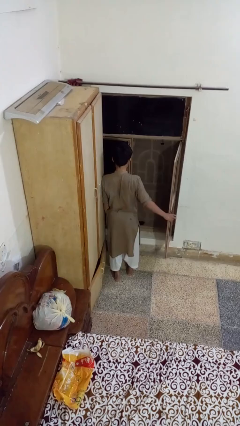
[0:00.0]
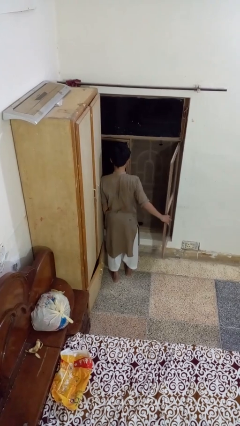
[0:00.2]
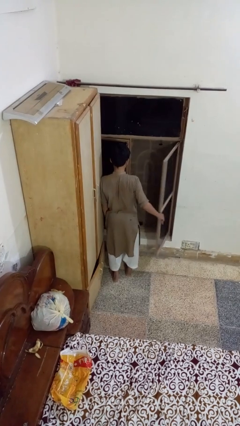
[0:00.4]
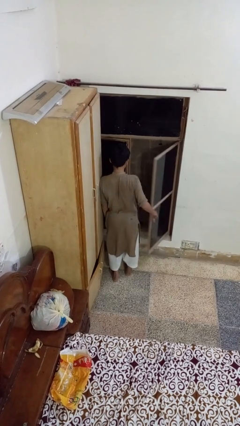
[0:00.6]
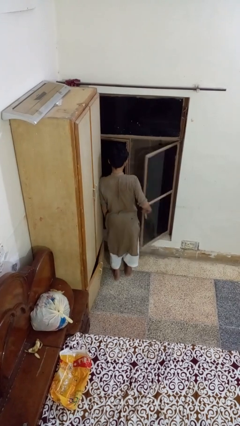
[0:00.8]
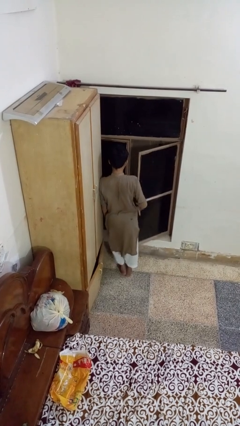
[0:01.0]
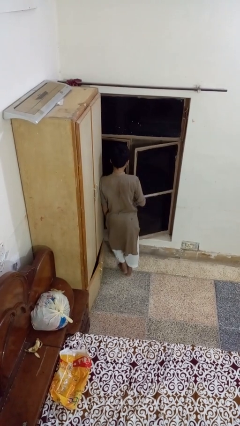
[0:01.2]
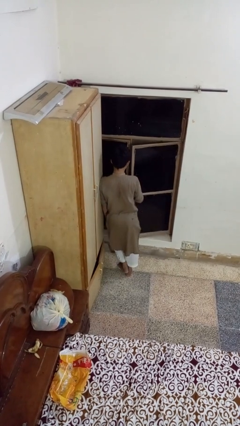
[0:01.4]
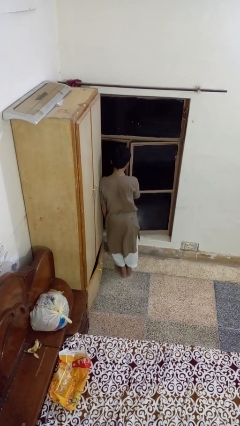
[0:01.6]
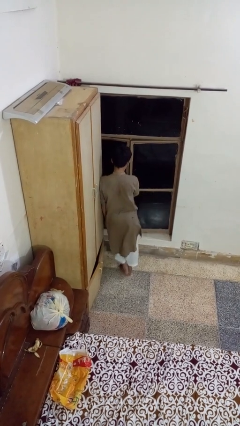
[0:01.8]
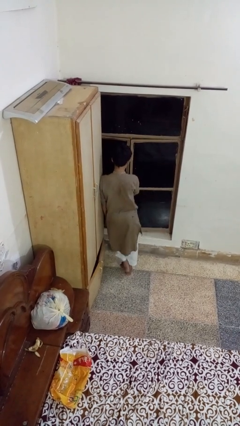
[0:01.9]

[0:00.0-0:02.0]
person closes home window

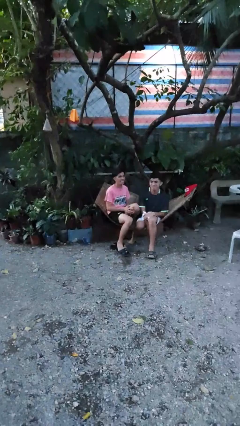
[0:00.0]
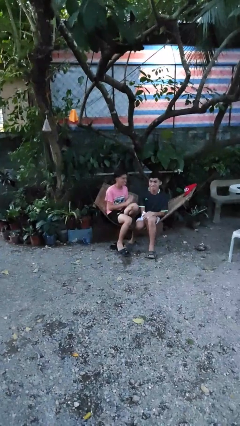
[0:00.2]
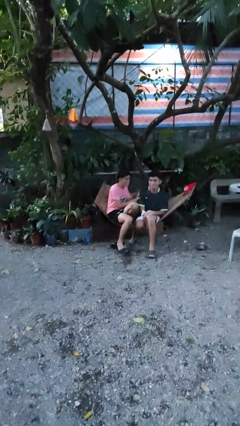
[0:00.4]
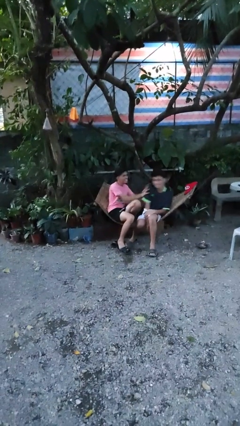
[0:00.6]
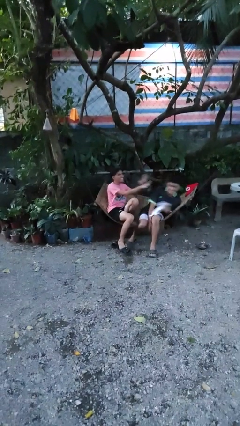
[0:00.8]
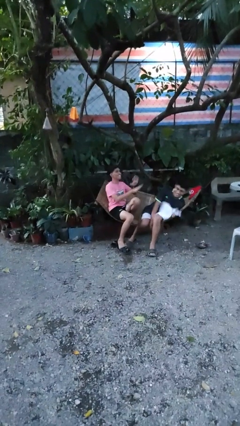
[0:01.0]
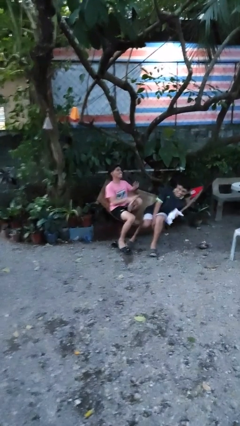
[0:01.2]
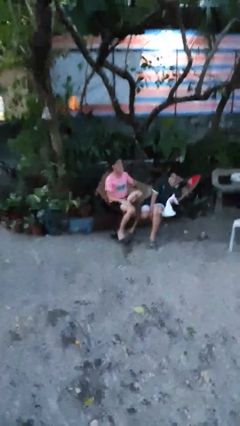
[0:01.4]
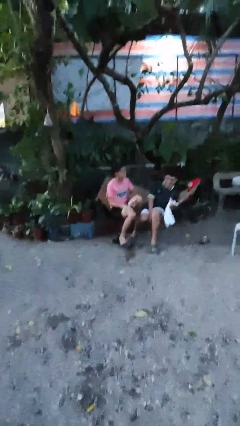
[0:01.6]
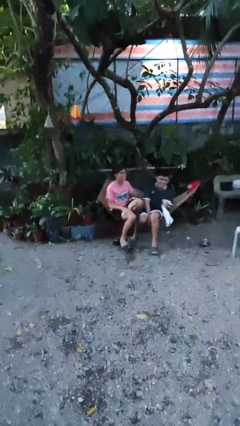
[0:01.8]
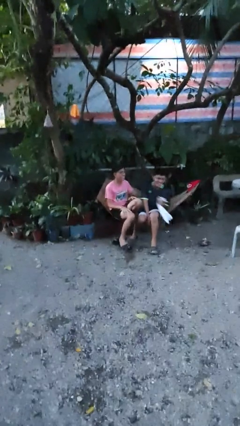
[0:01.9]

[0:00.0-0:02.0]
person shoves person

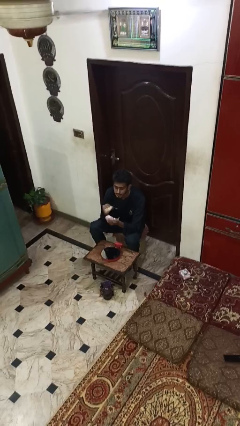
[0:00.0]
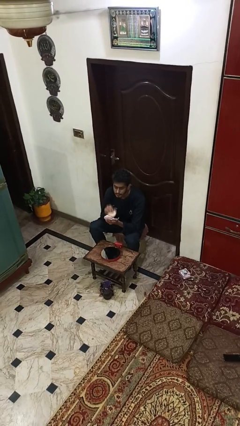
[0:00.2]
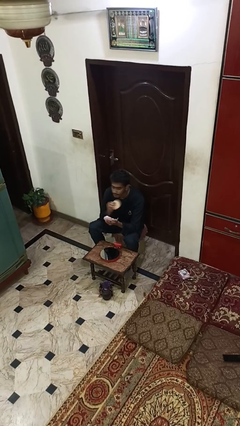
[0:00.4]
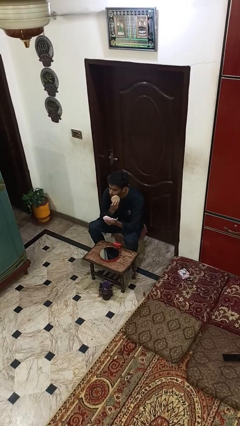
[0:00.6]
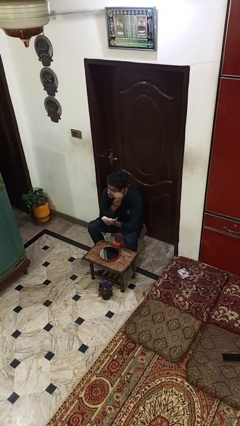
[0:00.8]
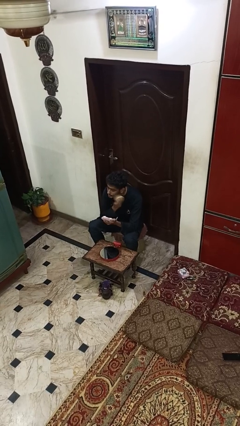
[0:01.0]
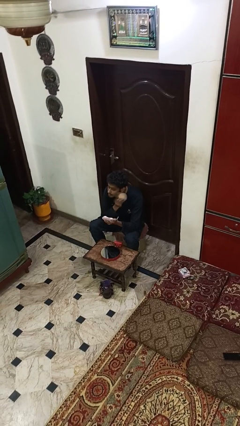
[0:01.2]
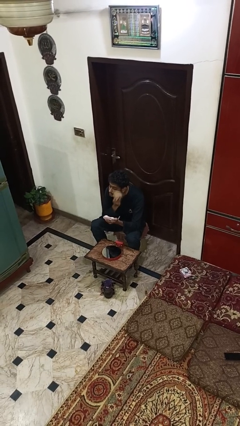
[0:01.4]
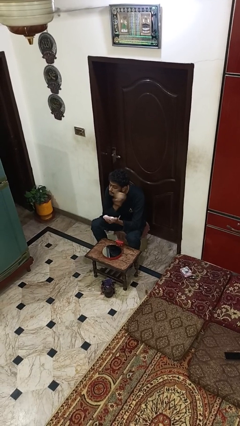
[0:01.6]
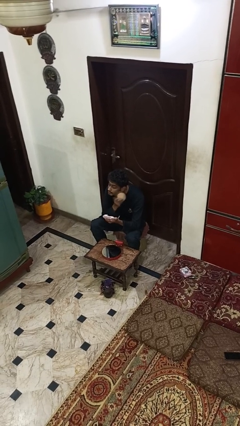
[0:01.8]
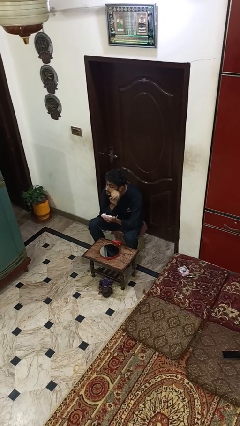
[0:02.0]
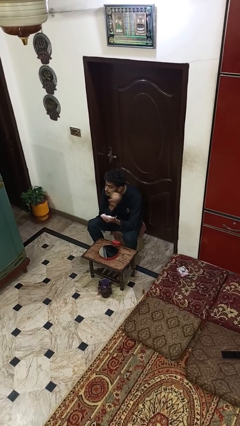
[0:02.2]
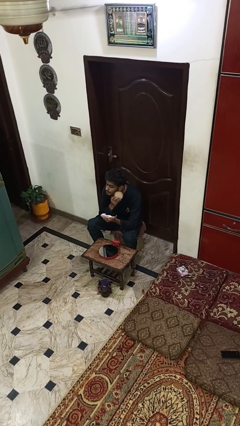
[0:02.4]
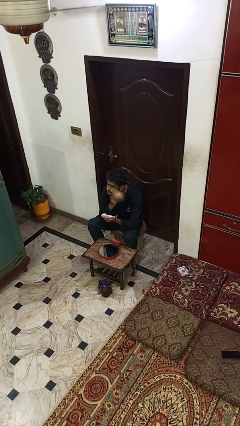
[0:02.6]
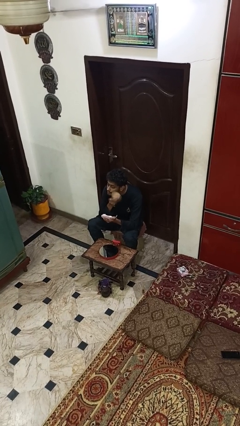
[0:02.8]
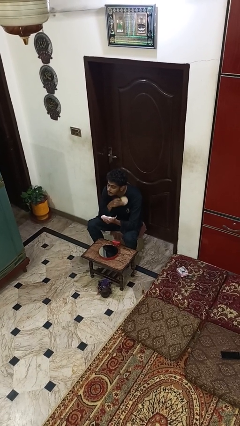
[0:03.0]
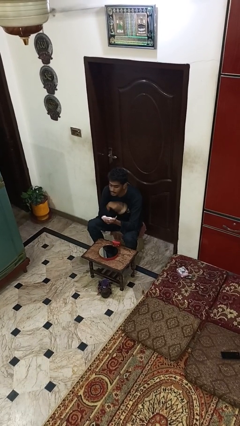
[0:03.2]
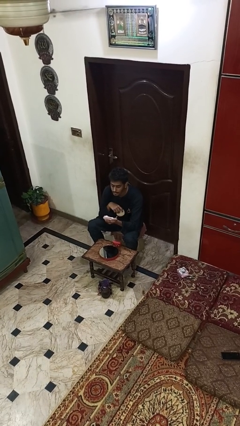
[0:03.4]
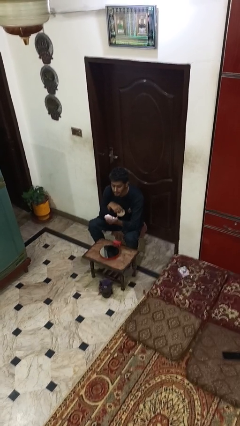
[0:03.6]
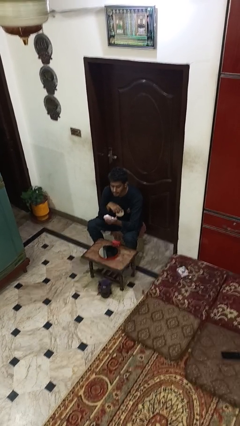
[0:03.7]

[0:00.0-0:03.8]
person applies foundation makeup

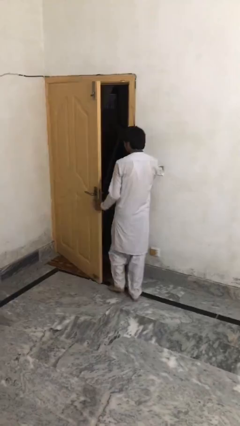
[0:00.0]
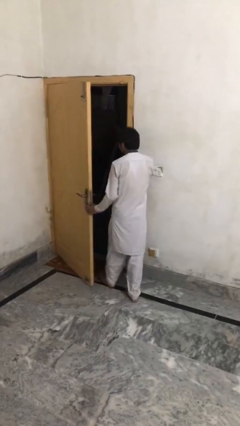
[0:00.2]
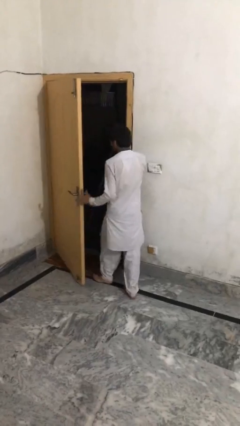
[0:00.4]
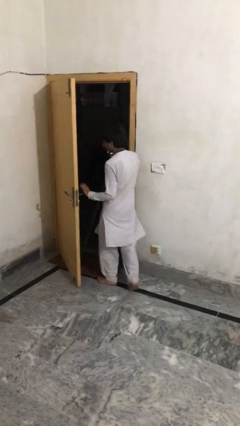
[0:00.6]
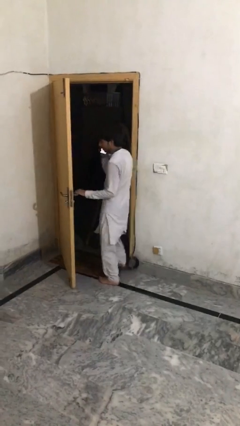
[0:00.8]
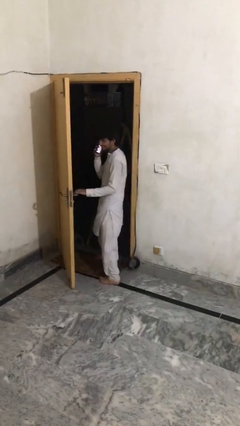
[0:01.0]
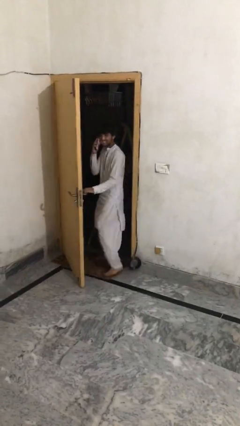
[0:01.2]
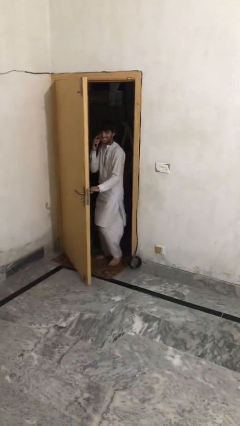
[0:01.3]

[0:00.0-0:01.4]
person exits scene through structure

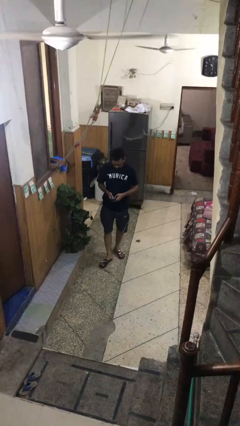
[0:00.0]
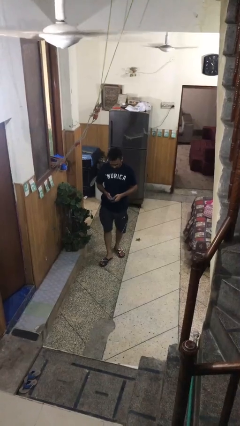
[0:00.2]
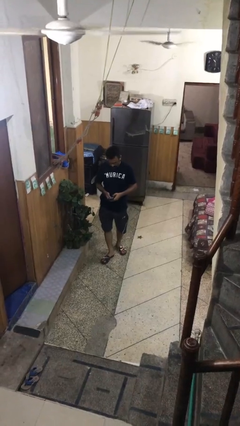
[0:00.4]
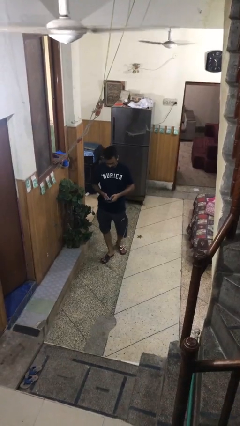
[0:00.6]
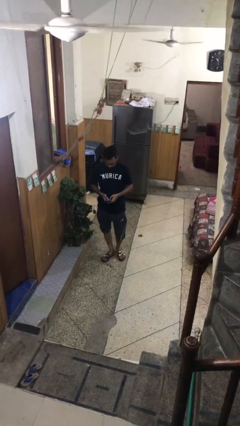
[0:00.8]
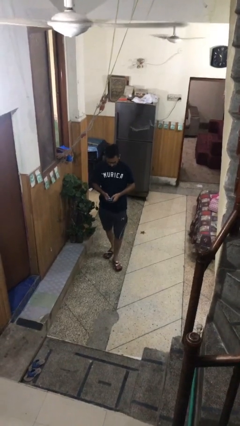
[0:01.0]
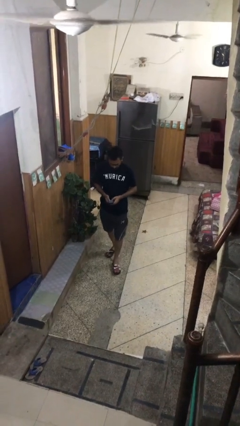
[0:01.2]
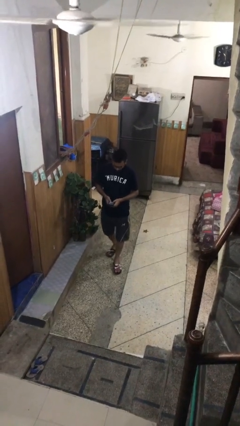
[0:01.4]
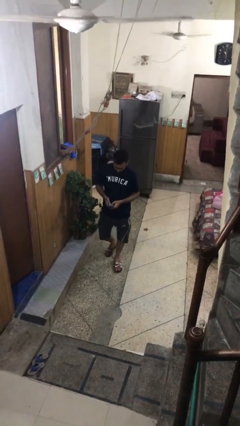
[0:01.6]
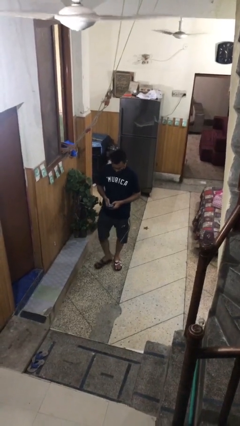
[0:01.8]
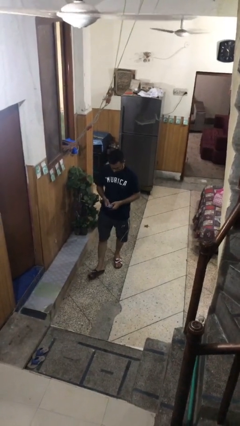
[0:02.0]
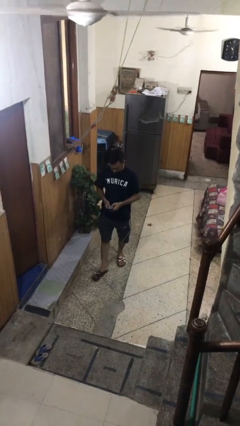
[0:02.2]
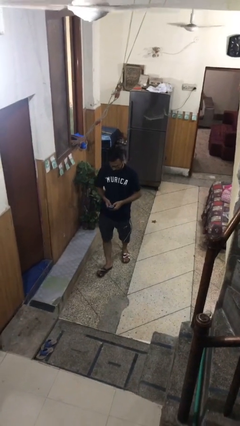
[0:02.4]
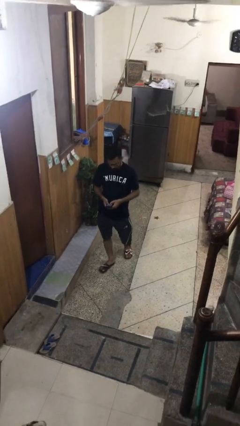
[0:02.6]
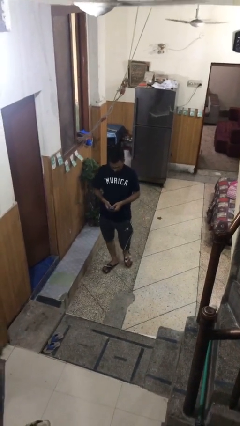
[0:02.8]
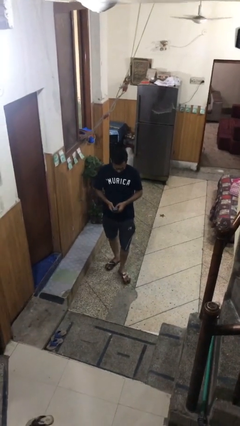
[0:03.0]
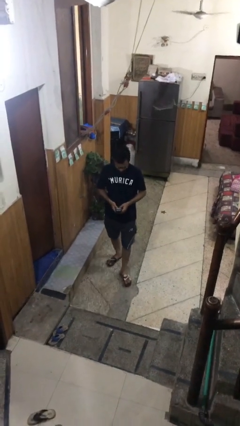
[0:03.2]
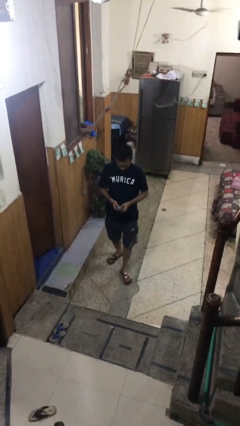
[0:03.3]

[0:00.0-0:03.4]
person texts on phone

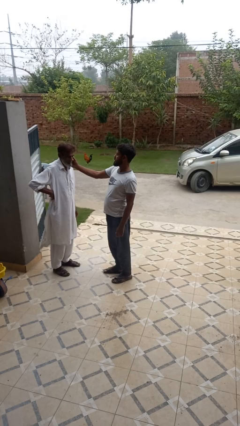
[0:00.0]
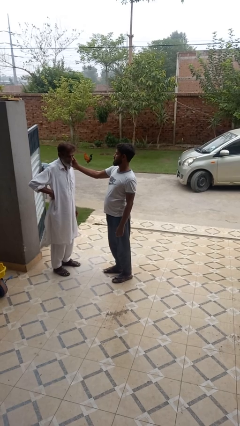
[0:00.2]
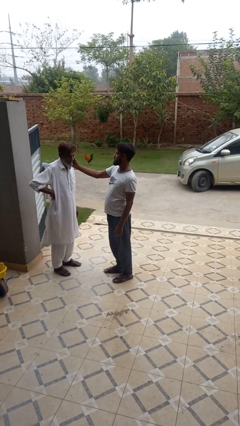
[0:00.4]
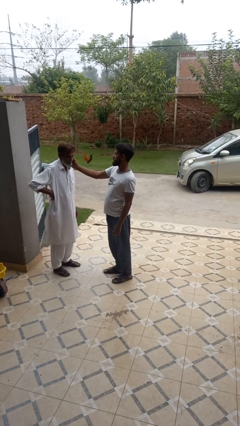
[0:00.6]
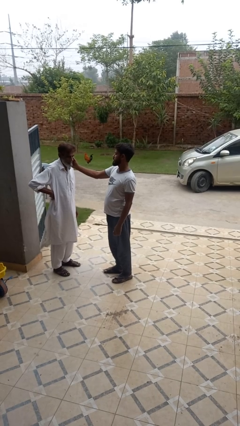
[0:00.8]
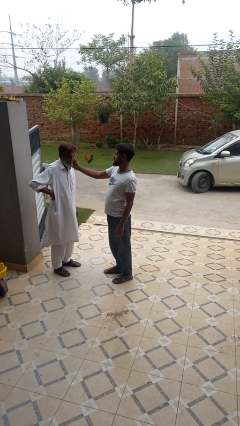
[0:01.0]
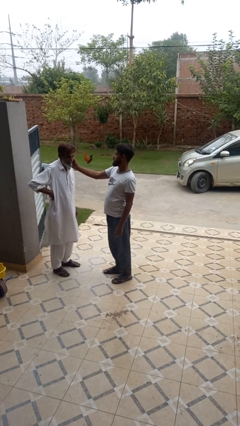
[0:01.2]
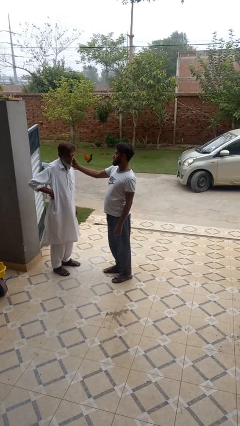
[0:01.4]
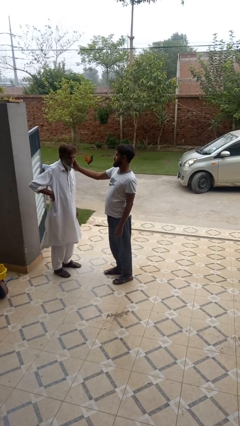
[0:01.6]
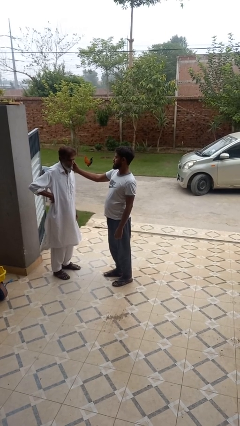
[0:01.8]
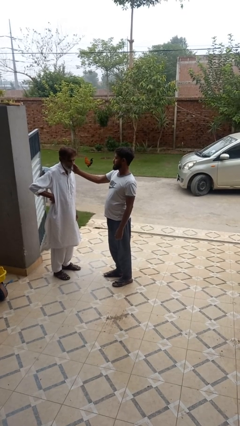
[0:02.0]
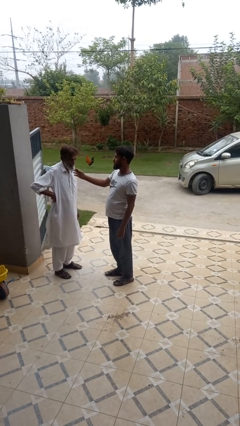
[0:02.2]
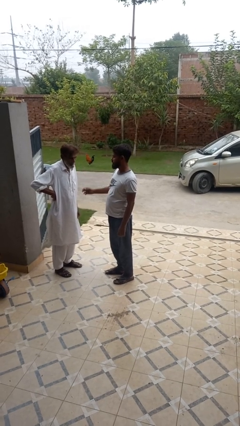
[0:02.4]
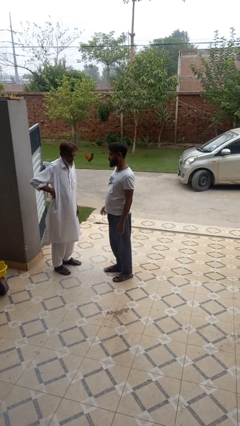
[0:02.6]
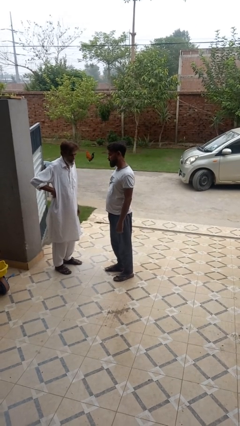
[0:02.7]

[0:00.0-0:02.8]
person touches face of person

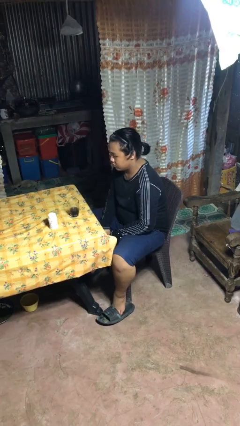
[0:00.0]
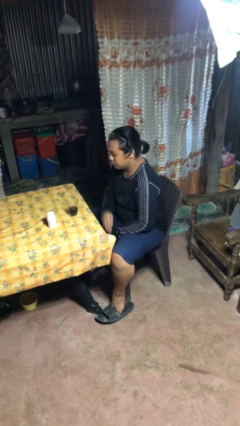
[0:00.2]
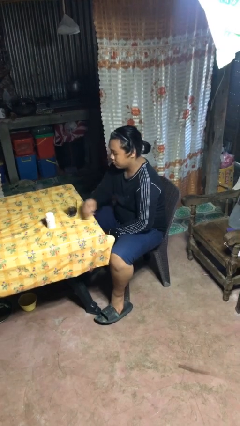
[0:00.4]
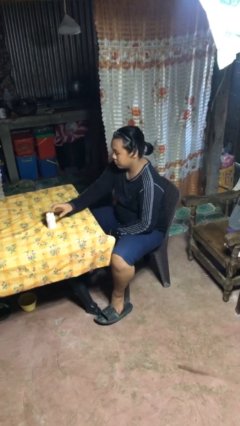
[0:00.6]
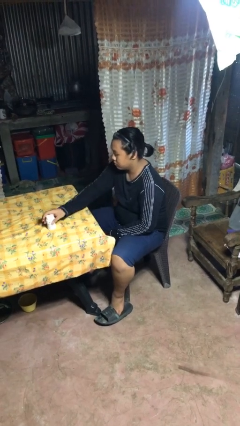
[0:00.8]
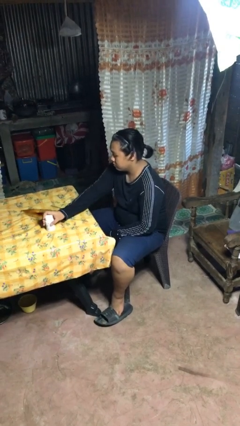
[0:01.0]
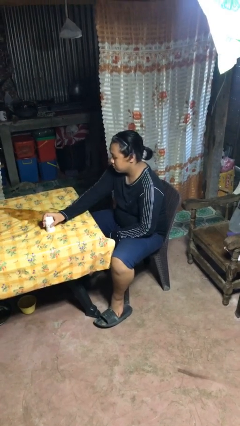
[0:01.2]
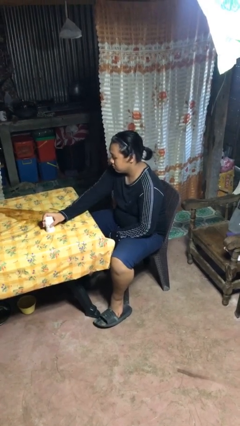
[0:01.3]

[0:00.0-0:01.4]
person spills on table

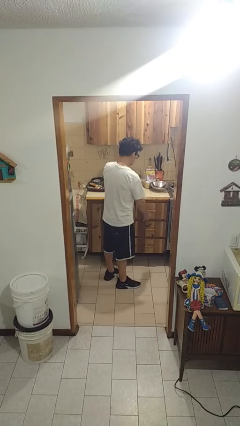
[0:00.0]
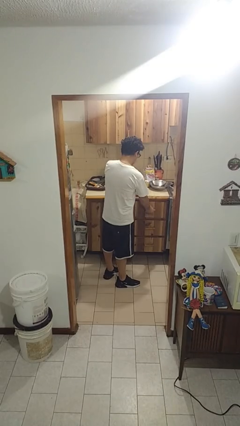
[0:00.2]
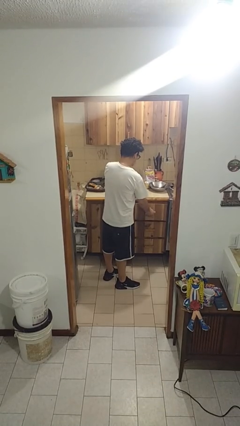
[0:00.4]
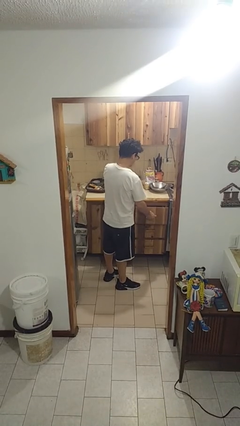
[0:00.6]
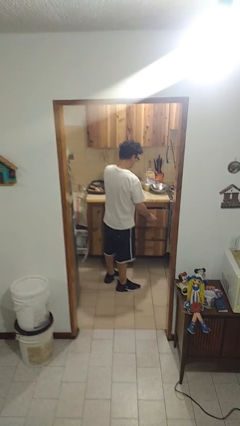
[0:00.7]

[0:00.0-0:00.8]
person opens kitchen drawer
